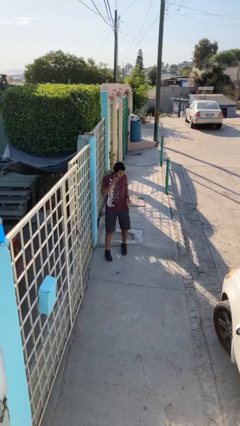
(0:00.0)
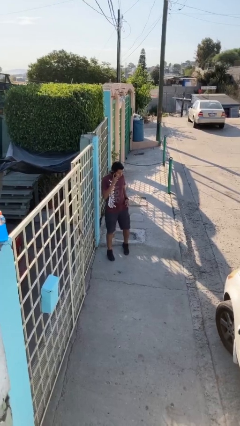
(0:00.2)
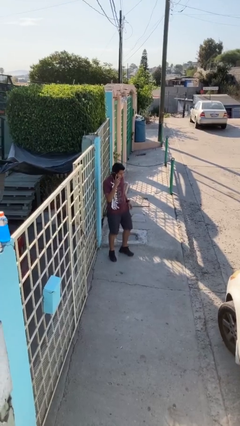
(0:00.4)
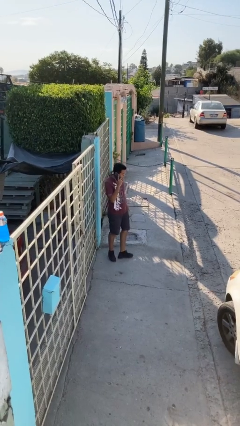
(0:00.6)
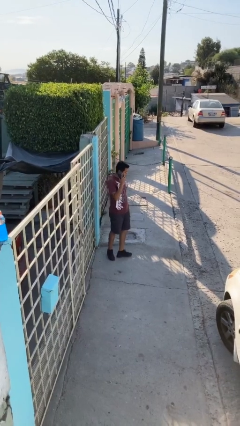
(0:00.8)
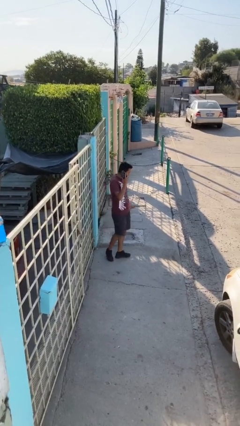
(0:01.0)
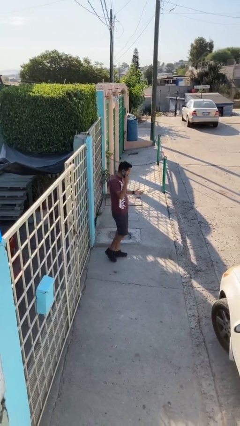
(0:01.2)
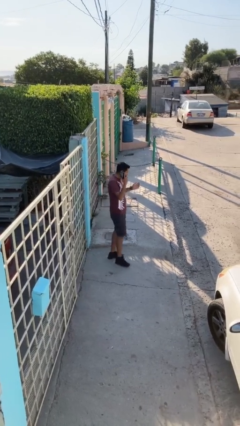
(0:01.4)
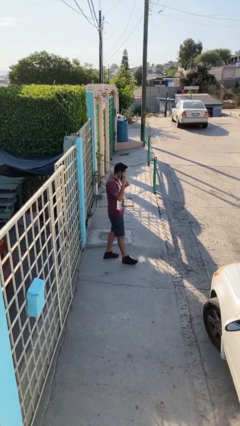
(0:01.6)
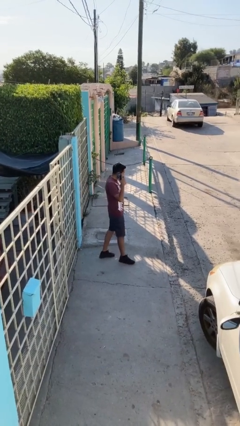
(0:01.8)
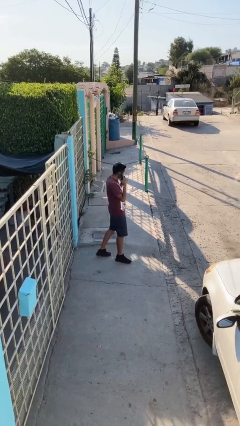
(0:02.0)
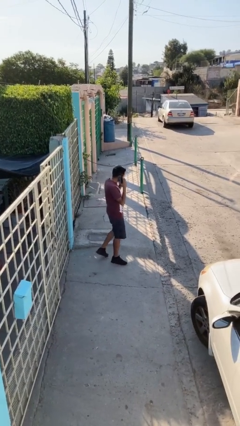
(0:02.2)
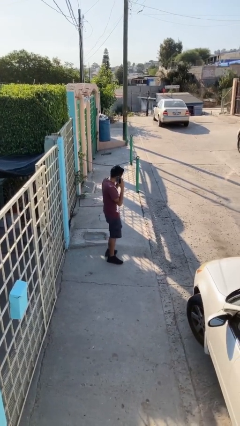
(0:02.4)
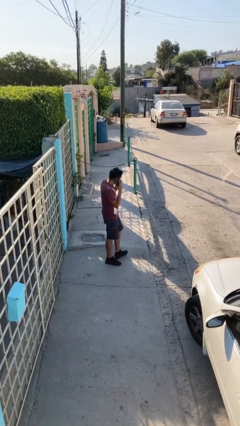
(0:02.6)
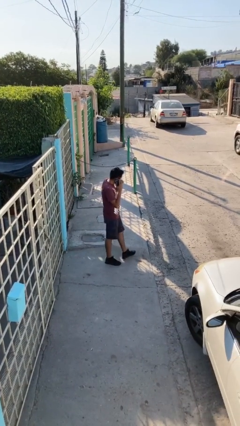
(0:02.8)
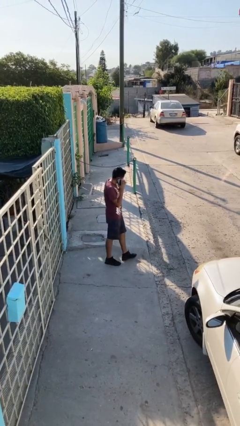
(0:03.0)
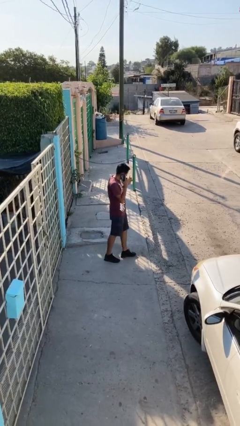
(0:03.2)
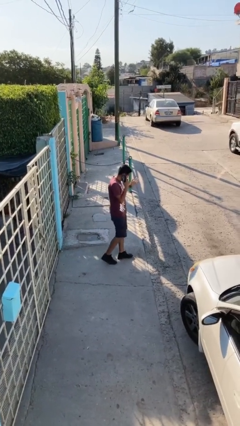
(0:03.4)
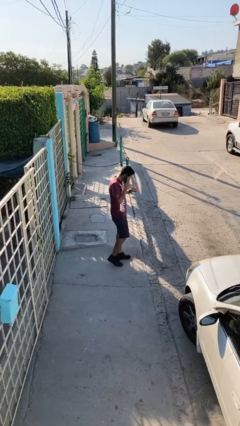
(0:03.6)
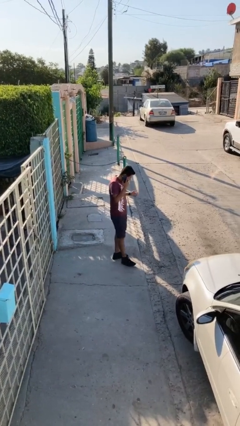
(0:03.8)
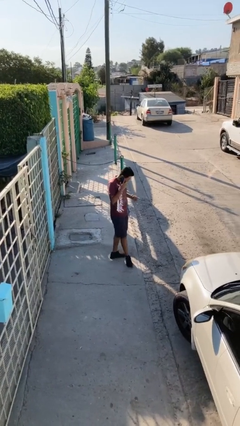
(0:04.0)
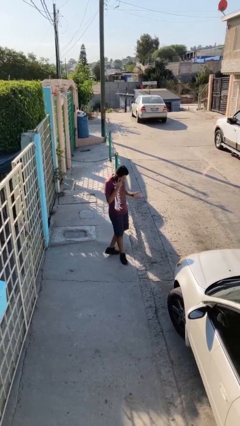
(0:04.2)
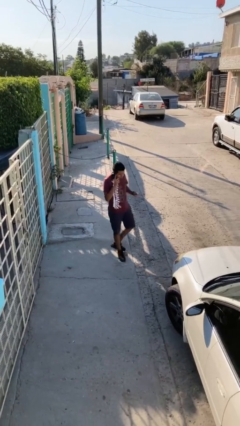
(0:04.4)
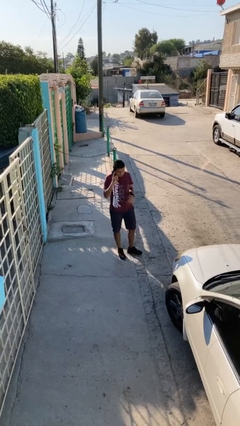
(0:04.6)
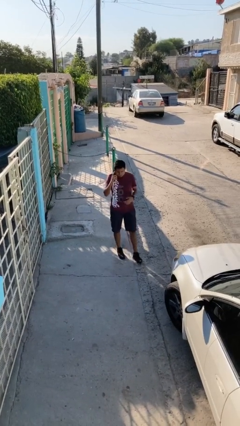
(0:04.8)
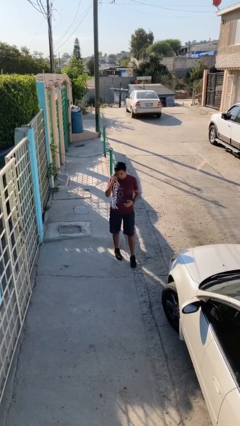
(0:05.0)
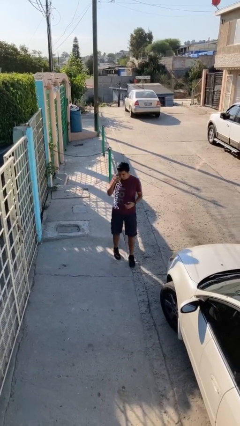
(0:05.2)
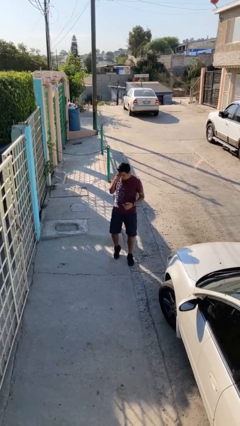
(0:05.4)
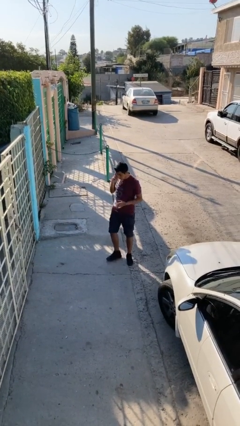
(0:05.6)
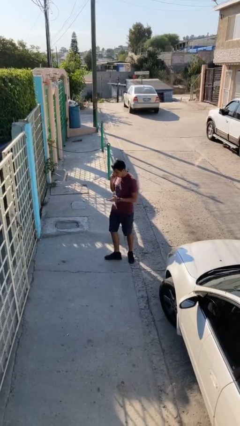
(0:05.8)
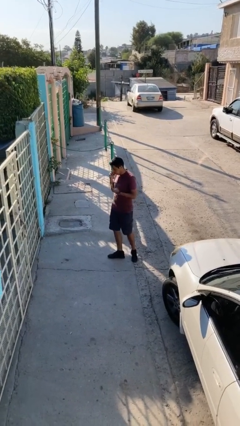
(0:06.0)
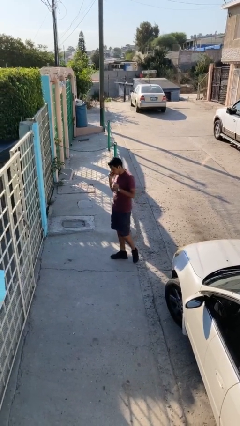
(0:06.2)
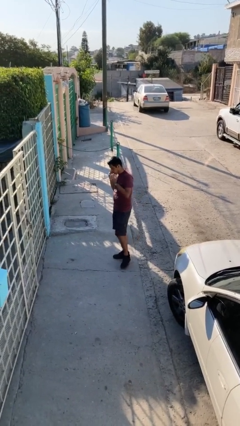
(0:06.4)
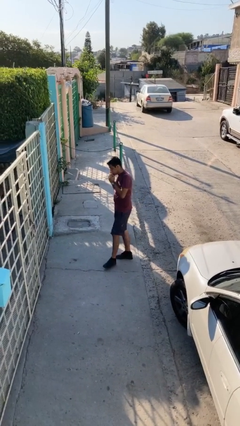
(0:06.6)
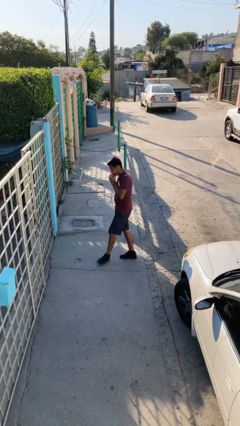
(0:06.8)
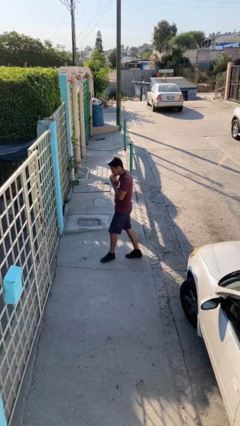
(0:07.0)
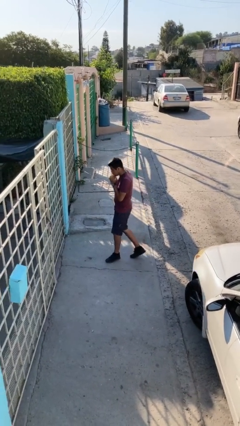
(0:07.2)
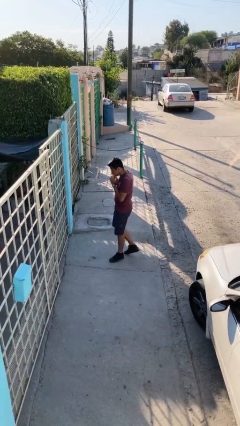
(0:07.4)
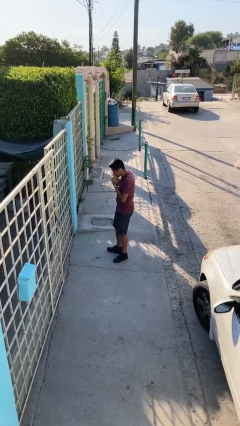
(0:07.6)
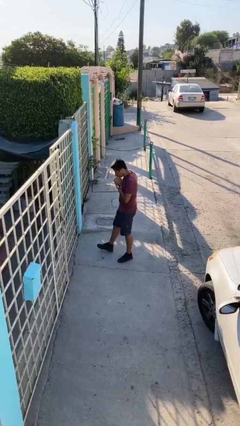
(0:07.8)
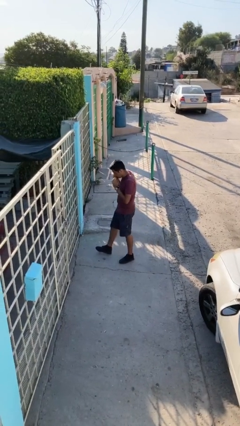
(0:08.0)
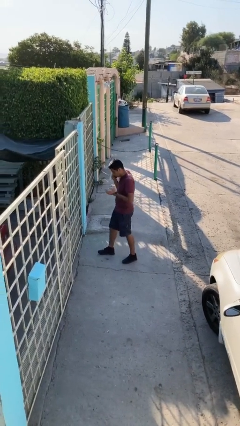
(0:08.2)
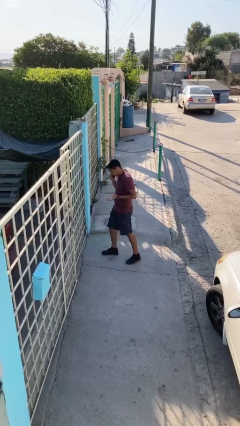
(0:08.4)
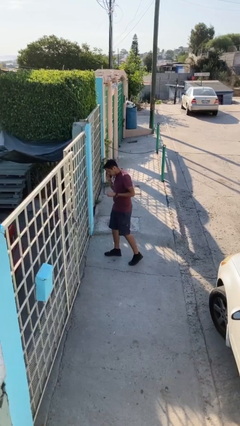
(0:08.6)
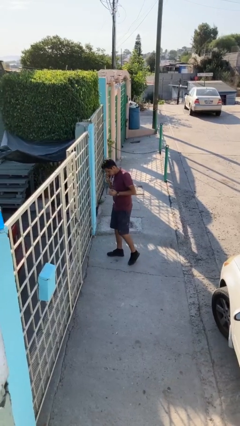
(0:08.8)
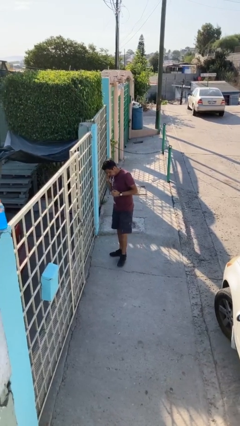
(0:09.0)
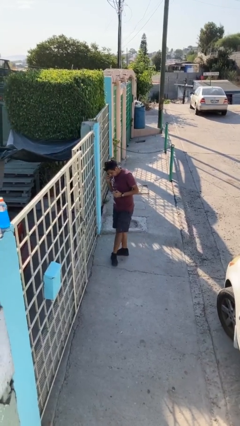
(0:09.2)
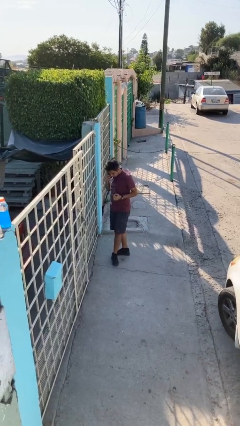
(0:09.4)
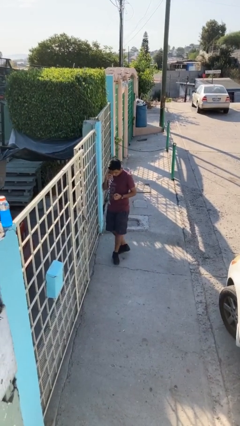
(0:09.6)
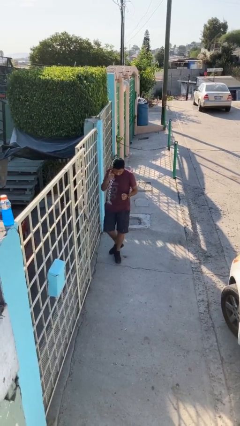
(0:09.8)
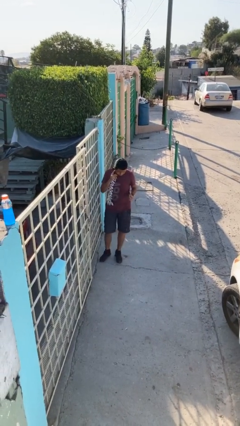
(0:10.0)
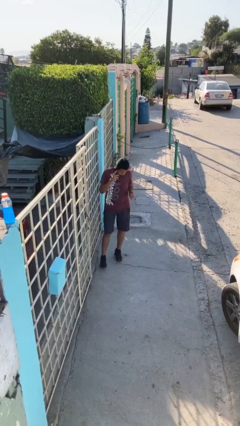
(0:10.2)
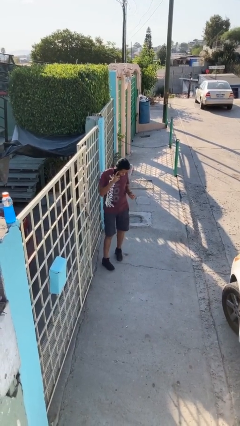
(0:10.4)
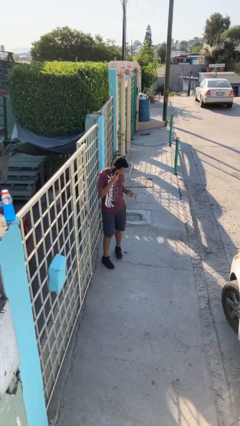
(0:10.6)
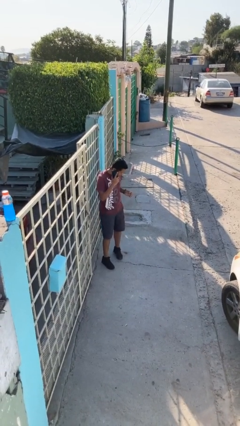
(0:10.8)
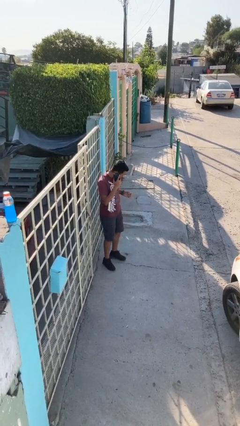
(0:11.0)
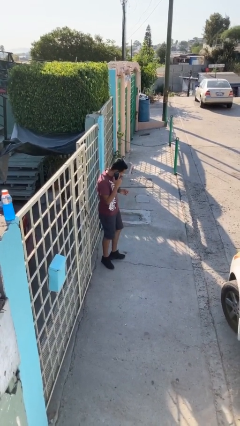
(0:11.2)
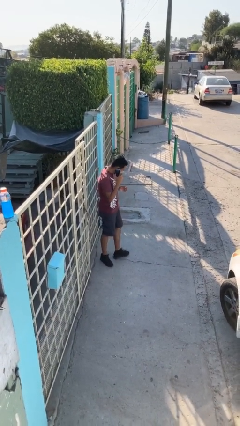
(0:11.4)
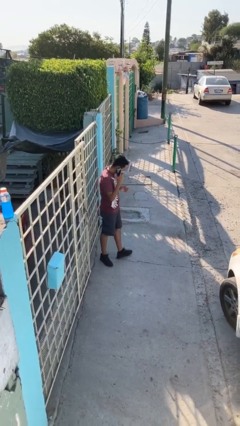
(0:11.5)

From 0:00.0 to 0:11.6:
person talks on phone

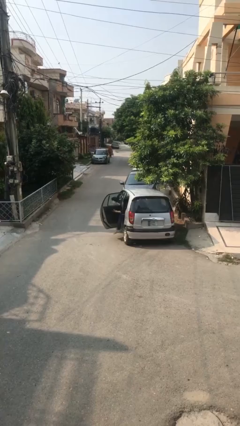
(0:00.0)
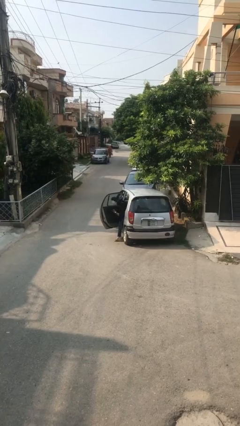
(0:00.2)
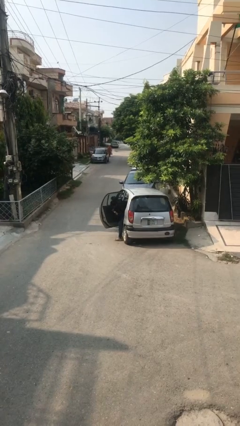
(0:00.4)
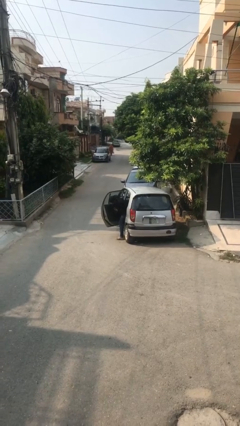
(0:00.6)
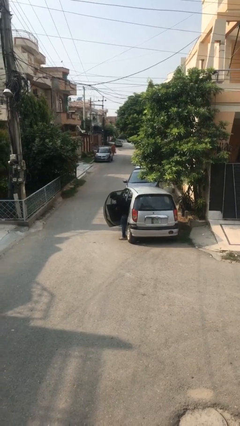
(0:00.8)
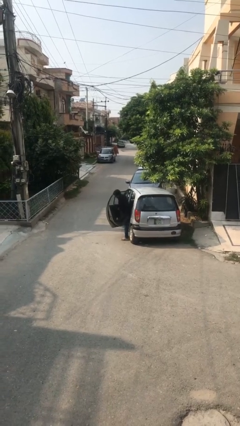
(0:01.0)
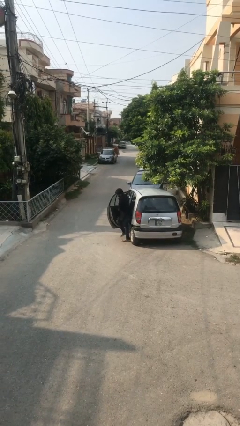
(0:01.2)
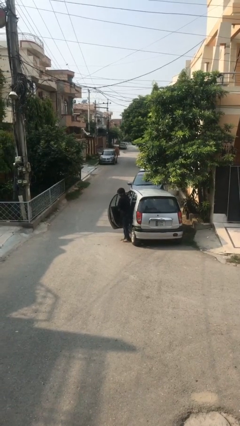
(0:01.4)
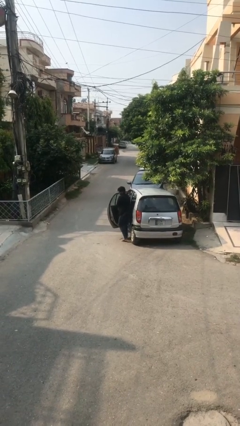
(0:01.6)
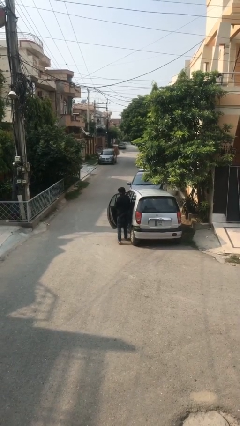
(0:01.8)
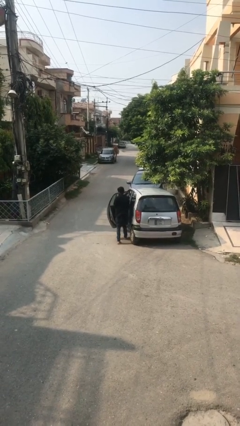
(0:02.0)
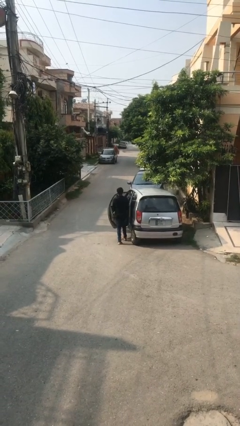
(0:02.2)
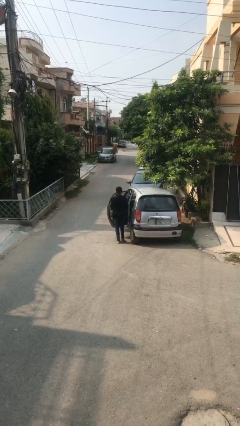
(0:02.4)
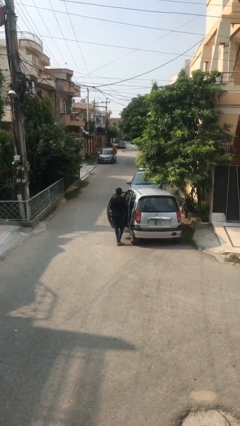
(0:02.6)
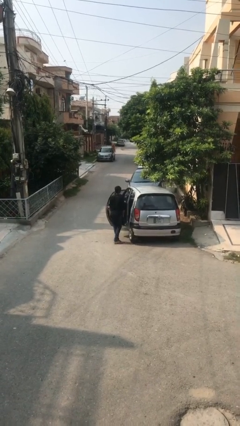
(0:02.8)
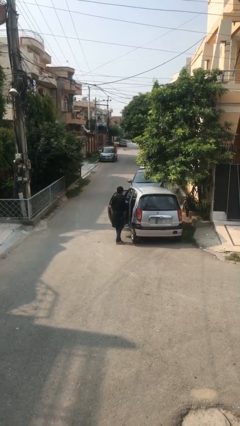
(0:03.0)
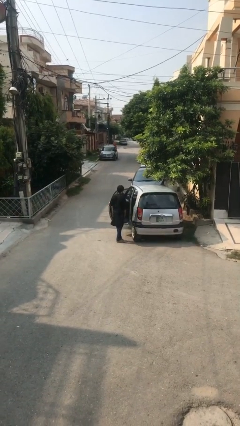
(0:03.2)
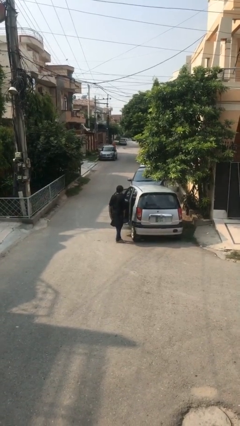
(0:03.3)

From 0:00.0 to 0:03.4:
person exits car

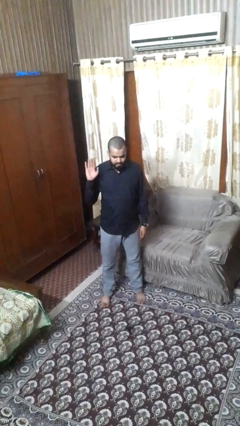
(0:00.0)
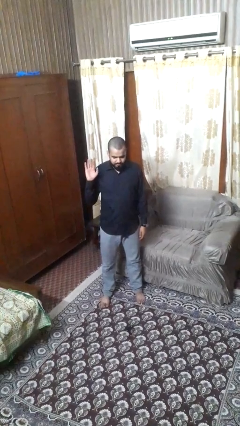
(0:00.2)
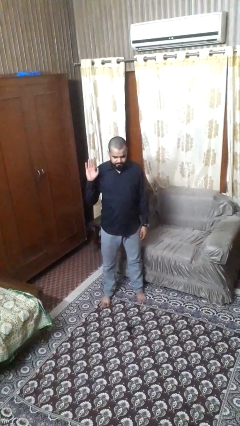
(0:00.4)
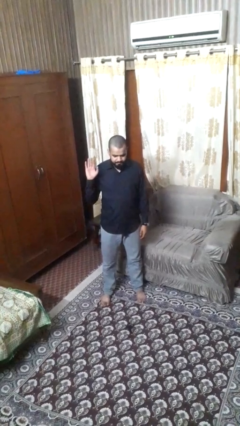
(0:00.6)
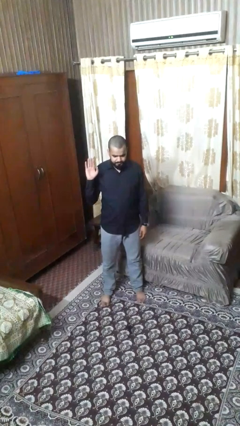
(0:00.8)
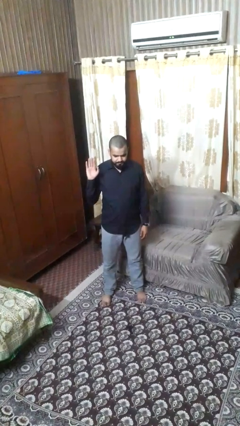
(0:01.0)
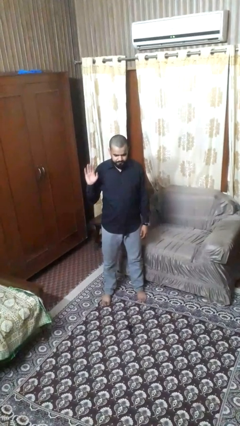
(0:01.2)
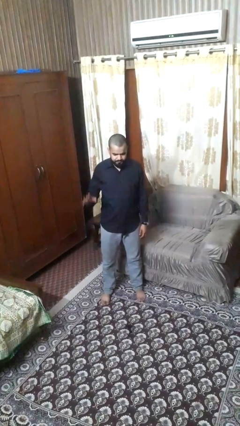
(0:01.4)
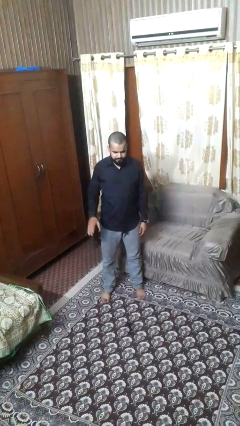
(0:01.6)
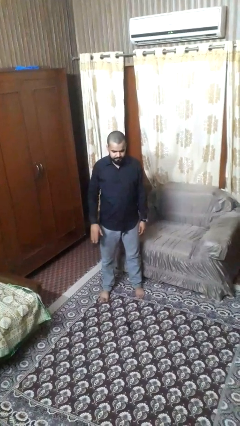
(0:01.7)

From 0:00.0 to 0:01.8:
person handstand

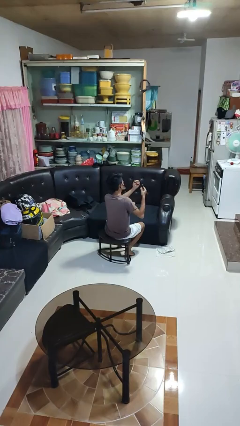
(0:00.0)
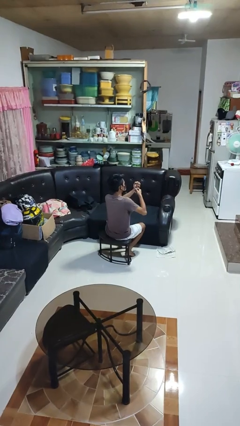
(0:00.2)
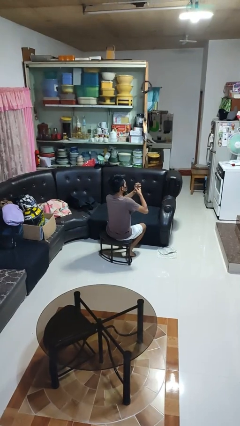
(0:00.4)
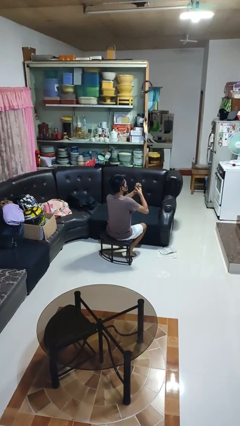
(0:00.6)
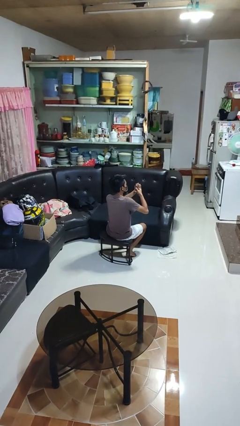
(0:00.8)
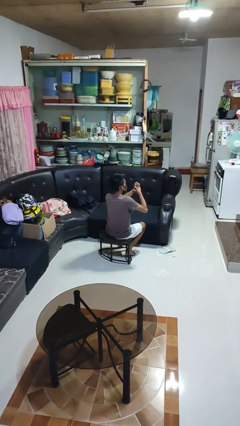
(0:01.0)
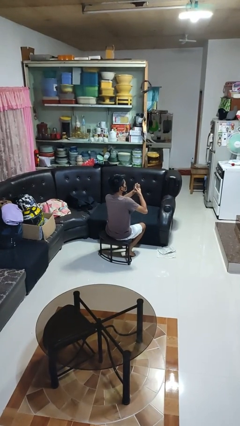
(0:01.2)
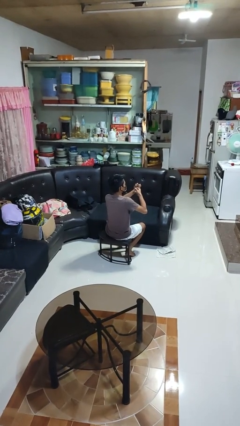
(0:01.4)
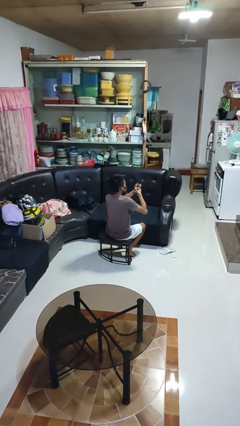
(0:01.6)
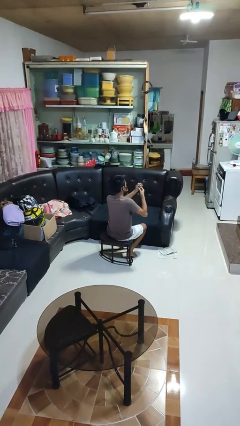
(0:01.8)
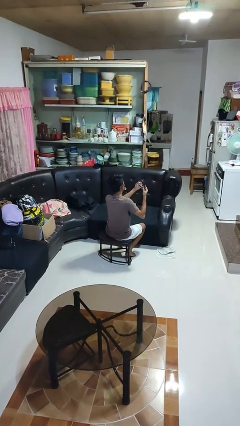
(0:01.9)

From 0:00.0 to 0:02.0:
person clips fingernails
